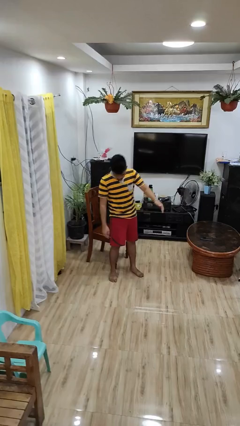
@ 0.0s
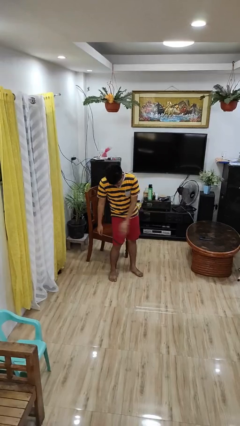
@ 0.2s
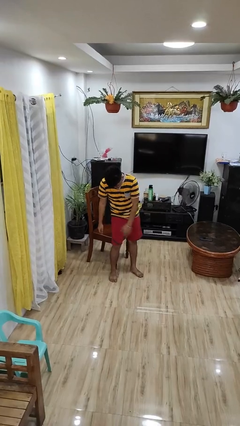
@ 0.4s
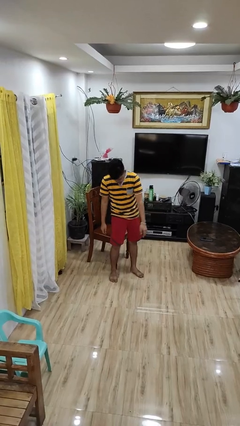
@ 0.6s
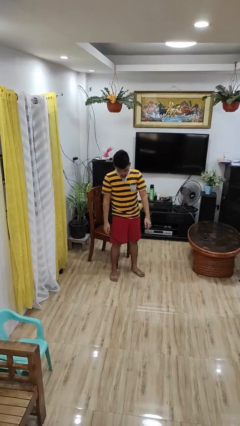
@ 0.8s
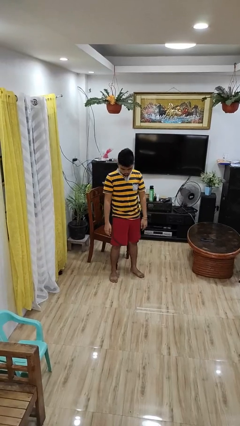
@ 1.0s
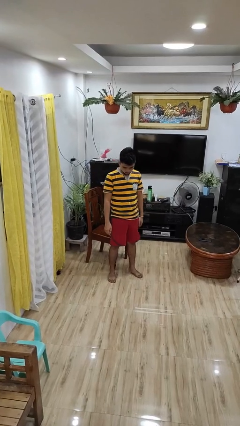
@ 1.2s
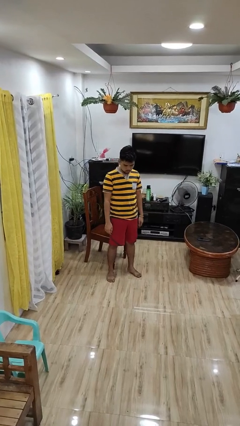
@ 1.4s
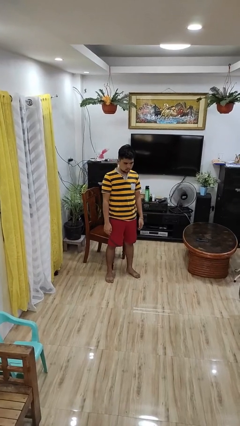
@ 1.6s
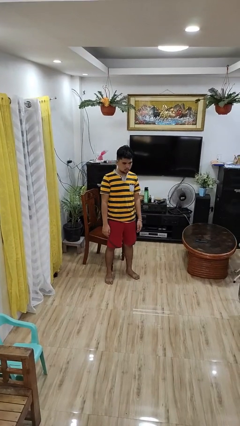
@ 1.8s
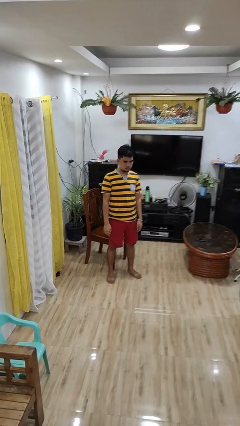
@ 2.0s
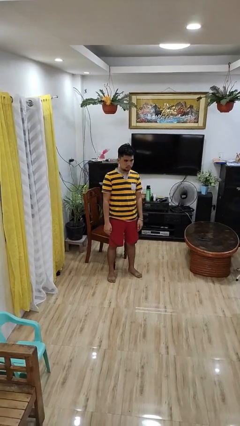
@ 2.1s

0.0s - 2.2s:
person slaps hands on thighs

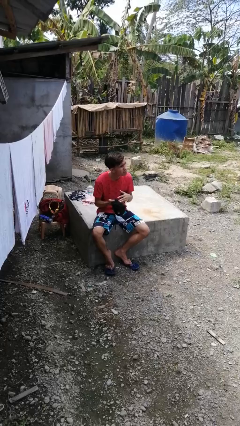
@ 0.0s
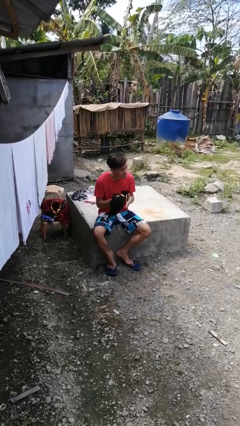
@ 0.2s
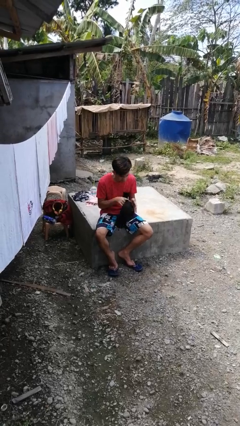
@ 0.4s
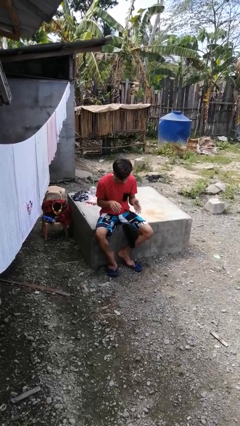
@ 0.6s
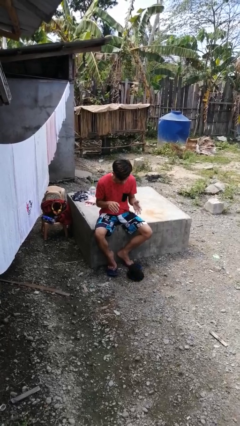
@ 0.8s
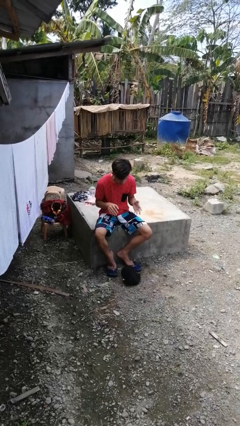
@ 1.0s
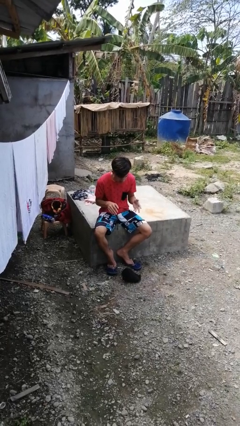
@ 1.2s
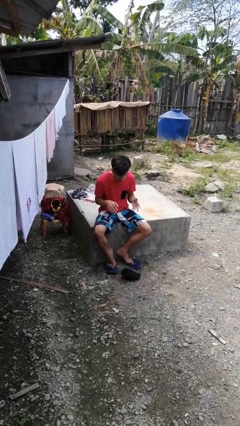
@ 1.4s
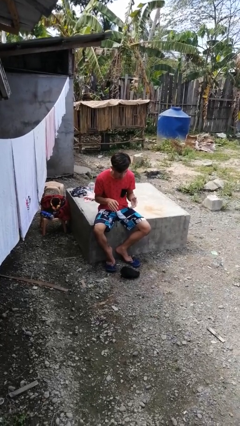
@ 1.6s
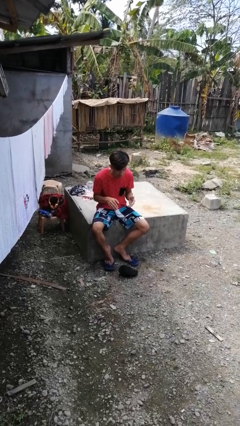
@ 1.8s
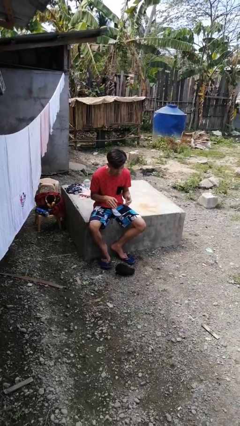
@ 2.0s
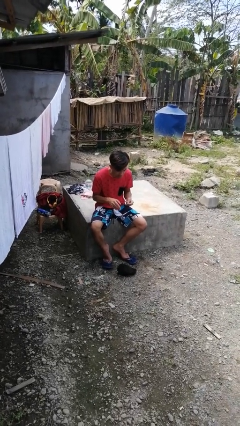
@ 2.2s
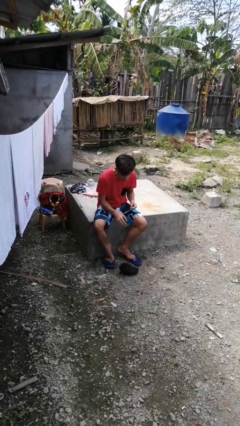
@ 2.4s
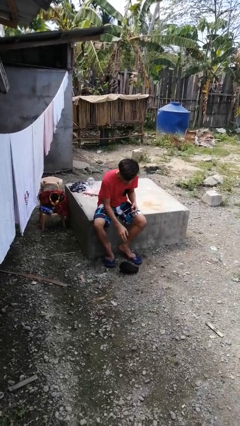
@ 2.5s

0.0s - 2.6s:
person drops object

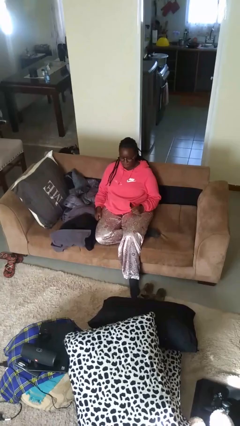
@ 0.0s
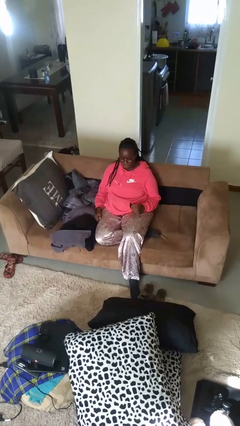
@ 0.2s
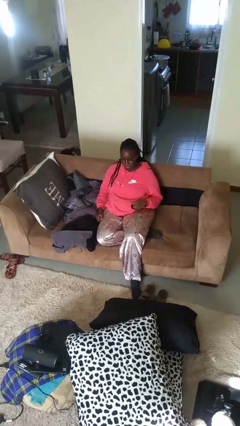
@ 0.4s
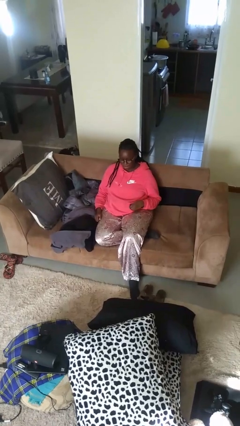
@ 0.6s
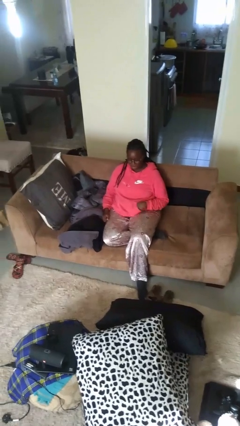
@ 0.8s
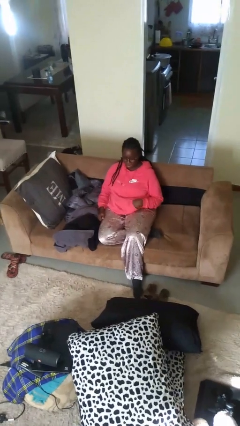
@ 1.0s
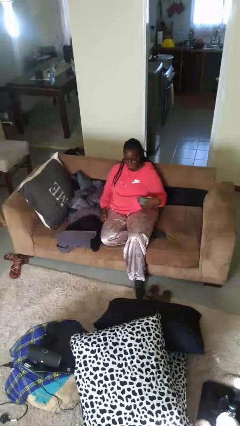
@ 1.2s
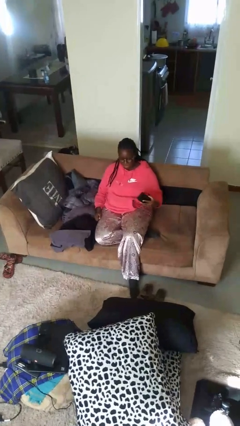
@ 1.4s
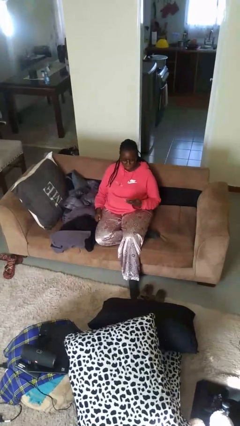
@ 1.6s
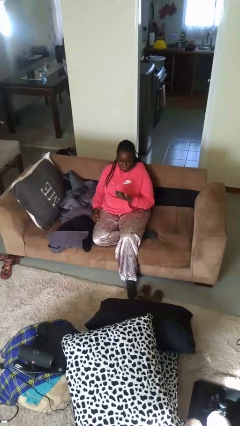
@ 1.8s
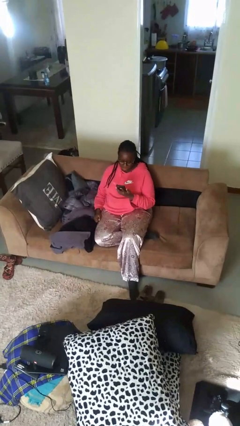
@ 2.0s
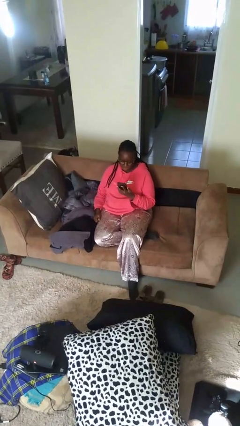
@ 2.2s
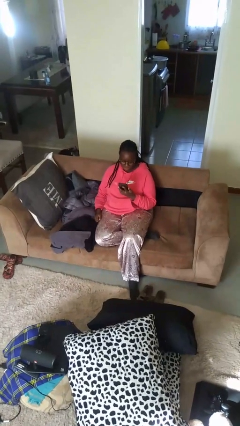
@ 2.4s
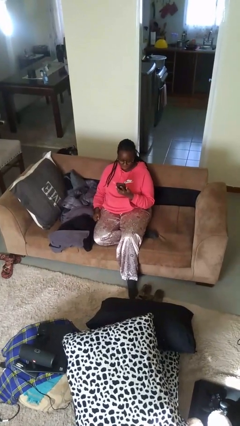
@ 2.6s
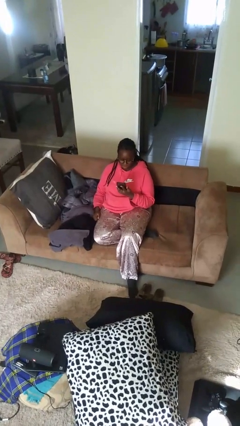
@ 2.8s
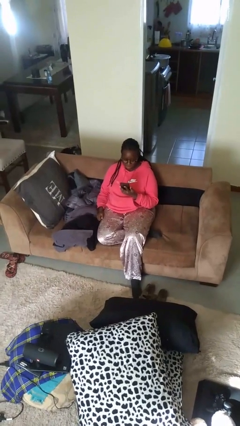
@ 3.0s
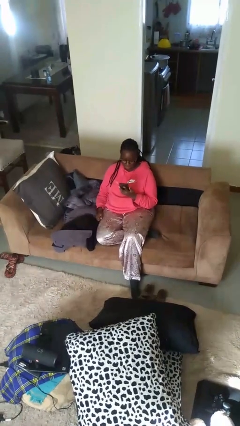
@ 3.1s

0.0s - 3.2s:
person takes phone from pocket

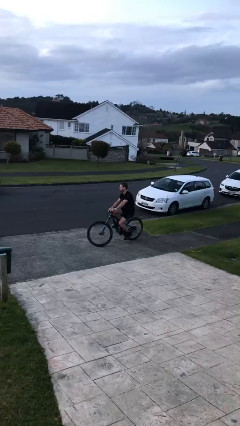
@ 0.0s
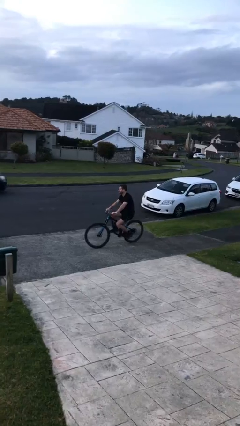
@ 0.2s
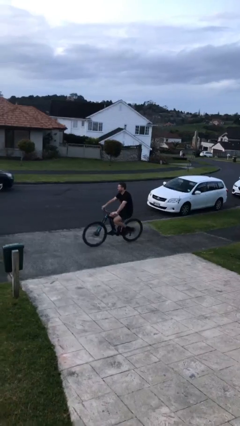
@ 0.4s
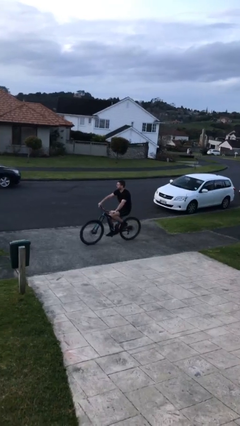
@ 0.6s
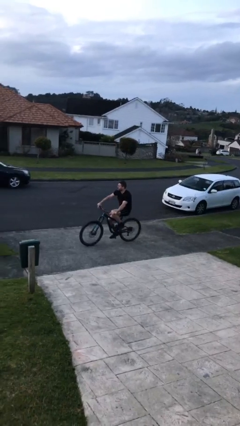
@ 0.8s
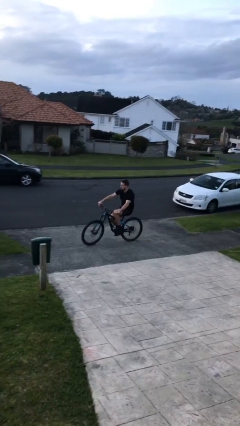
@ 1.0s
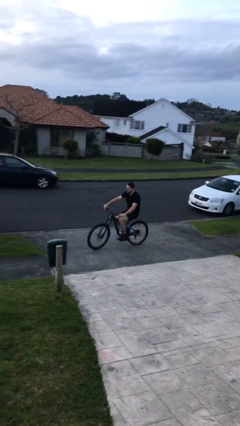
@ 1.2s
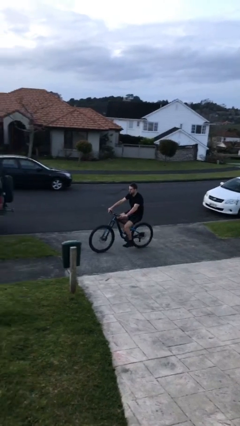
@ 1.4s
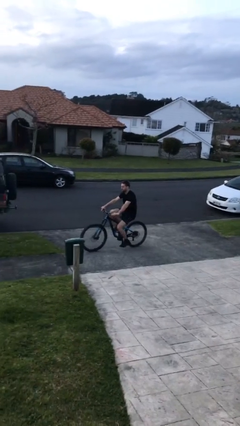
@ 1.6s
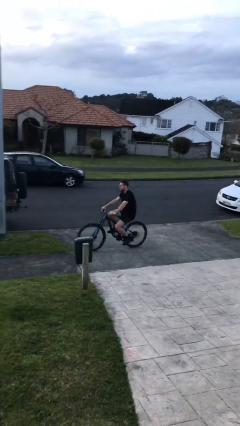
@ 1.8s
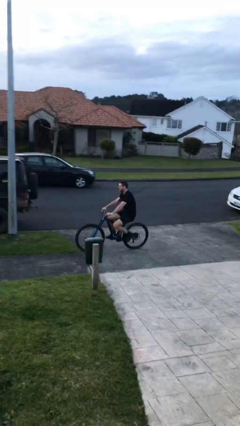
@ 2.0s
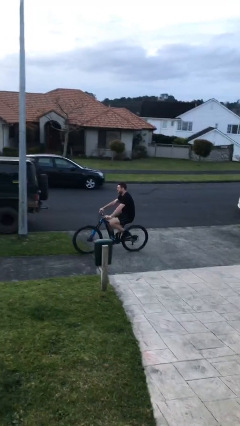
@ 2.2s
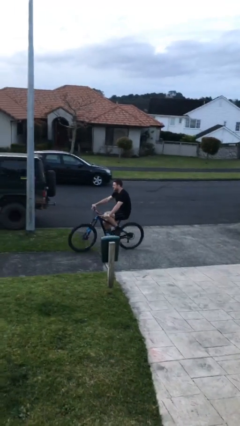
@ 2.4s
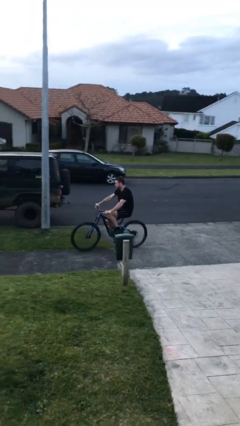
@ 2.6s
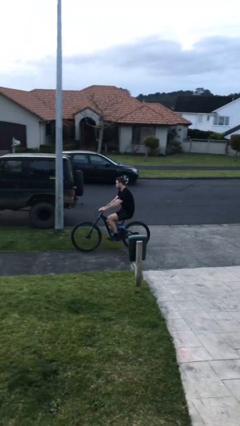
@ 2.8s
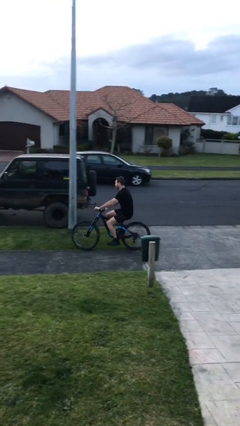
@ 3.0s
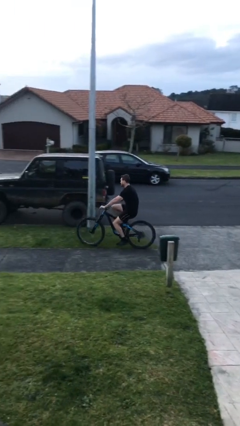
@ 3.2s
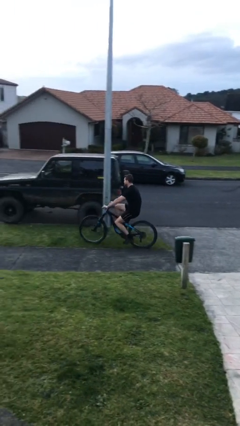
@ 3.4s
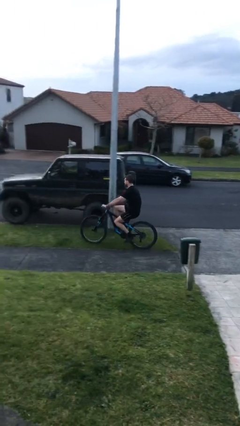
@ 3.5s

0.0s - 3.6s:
person rides bicycle

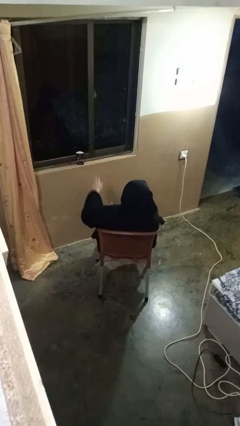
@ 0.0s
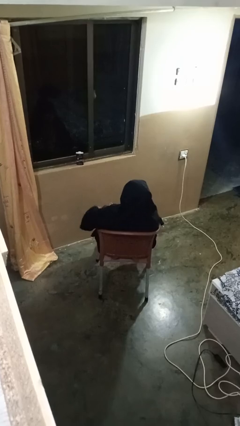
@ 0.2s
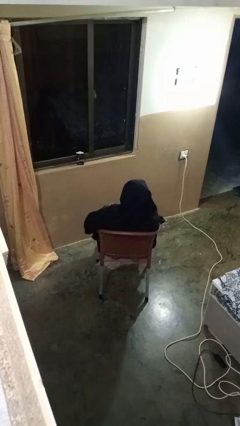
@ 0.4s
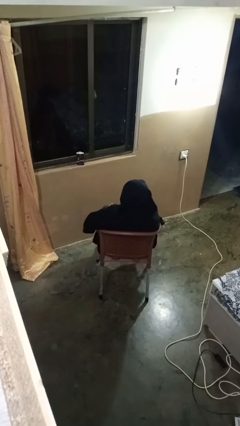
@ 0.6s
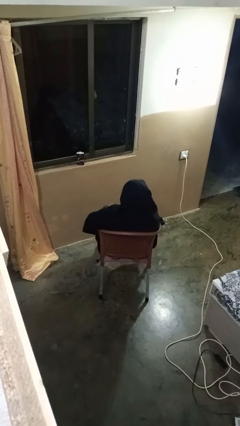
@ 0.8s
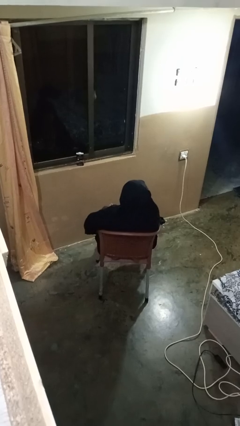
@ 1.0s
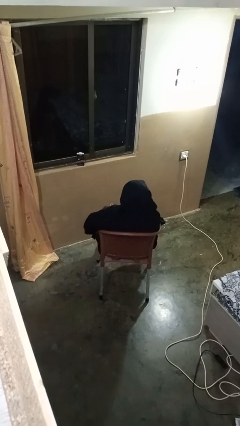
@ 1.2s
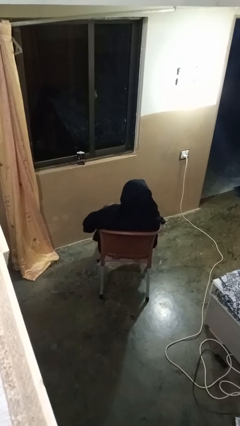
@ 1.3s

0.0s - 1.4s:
person gestures lower hand

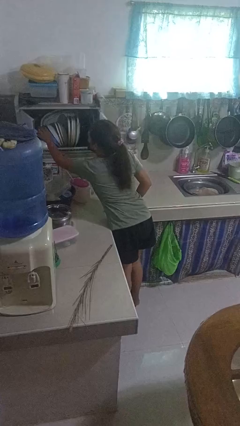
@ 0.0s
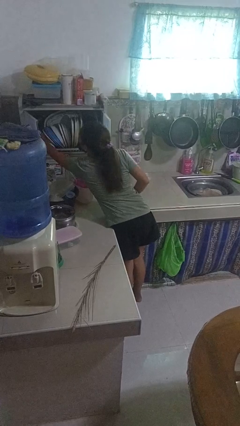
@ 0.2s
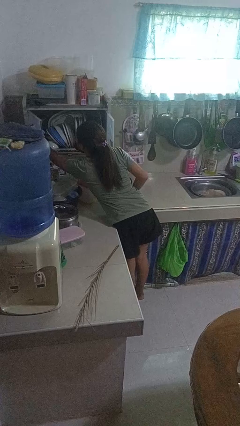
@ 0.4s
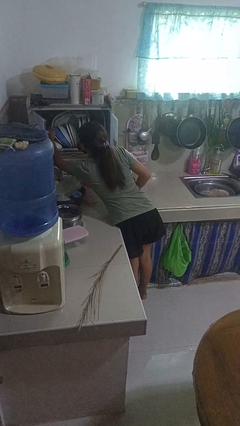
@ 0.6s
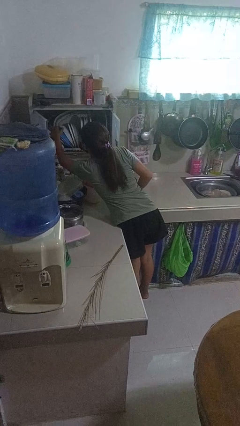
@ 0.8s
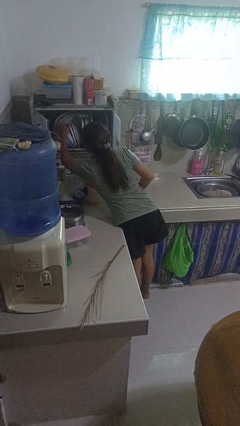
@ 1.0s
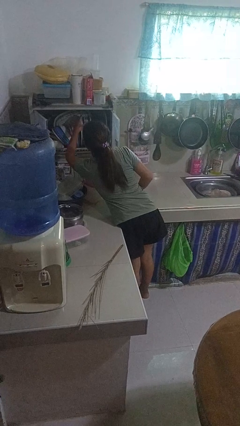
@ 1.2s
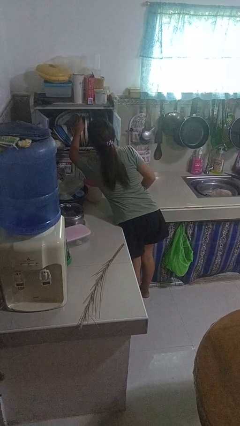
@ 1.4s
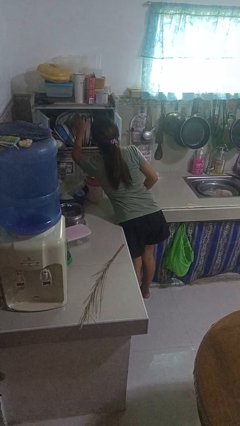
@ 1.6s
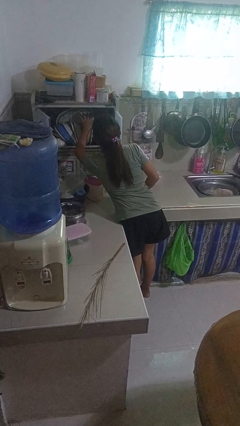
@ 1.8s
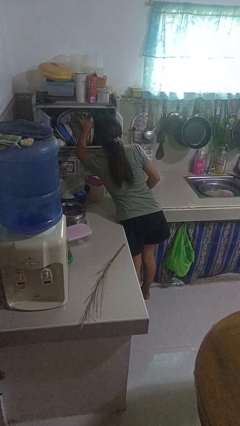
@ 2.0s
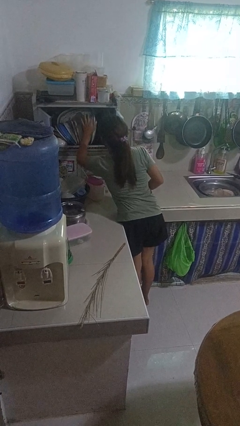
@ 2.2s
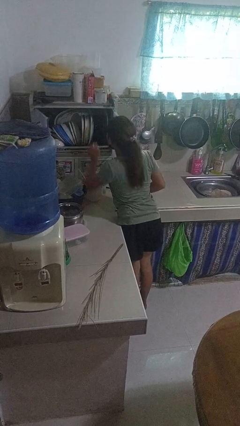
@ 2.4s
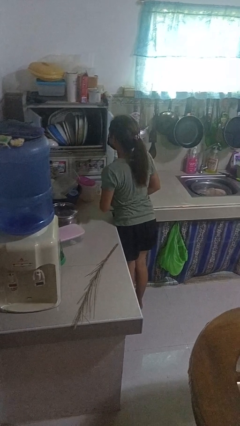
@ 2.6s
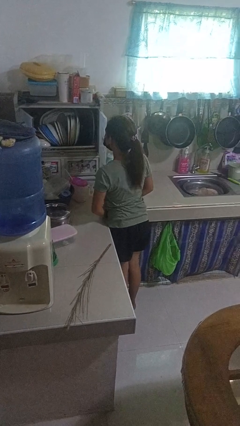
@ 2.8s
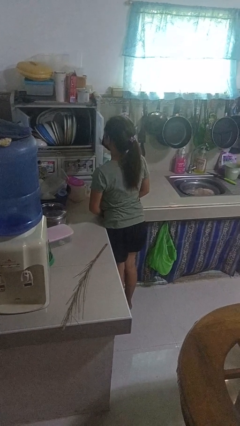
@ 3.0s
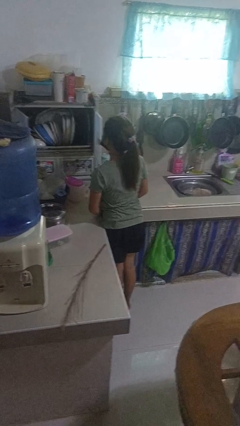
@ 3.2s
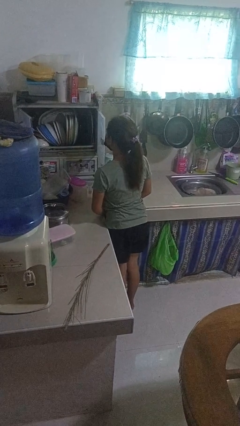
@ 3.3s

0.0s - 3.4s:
person searches in kitchen drawer

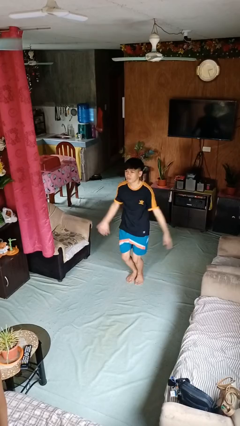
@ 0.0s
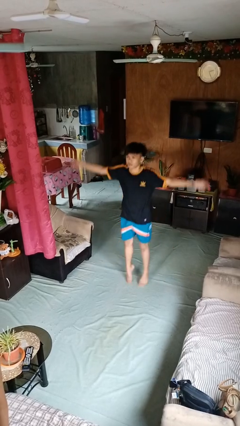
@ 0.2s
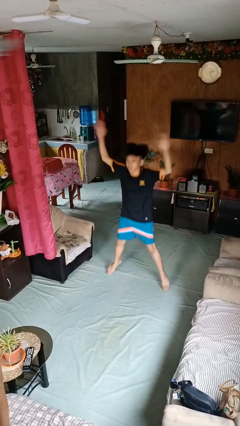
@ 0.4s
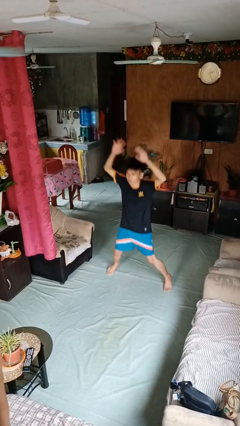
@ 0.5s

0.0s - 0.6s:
person exercises with jumping jacks
